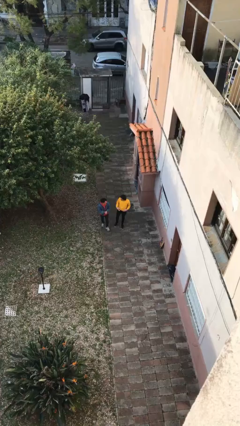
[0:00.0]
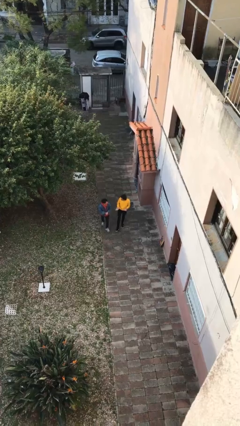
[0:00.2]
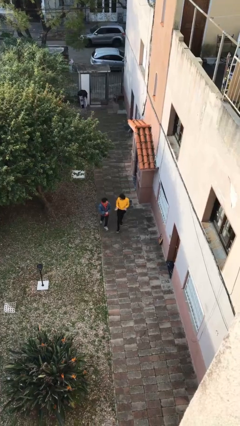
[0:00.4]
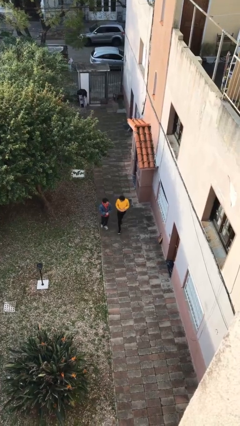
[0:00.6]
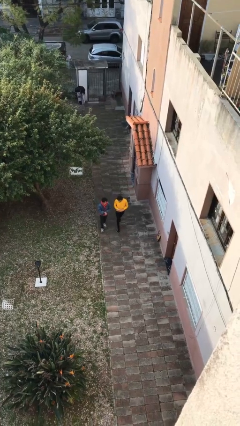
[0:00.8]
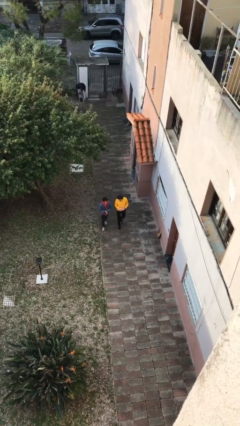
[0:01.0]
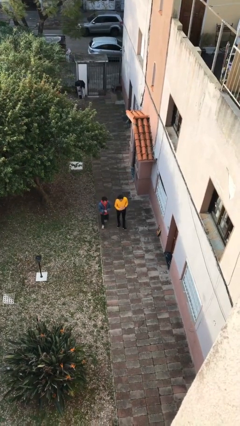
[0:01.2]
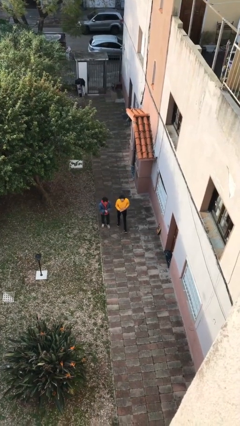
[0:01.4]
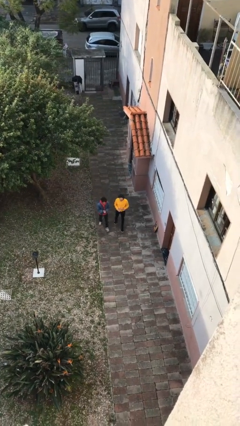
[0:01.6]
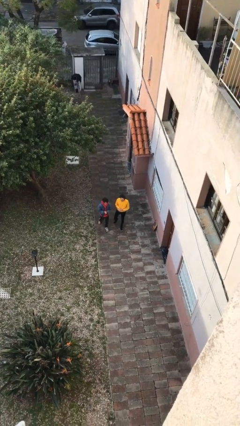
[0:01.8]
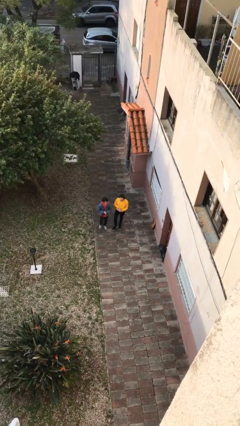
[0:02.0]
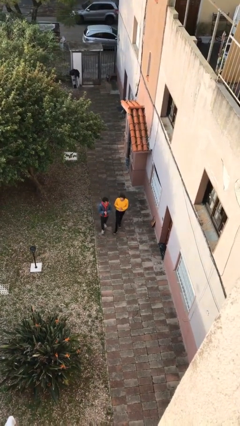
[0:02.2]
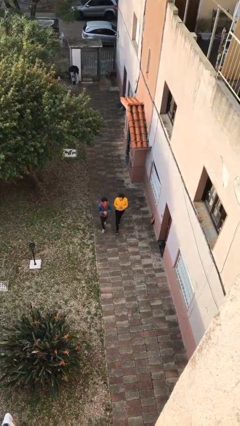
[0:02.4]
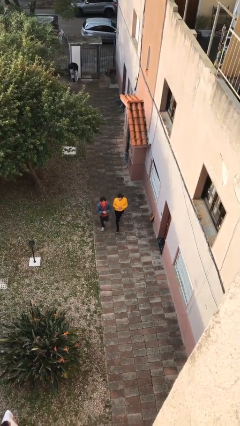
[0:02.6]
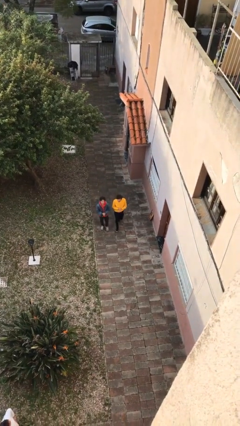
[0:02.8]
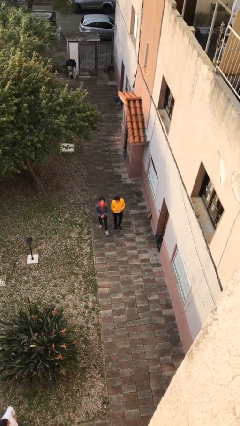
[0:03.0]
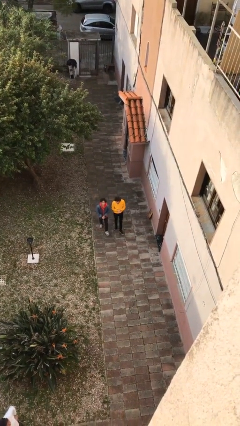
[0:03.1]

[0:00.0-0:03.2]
person talks to person

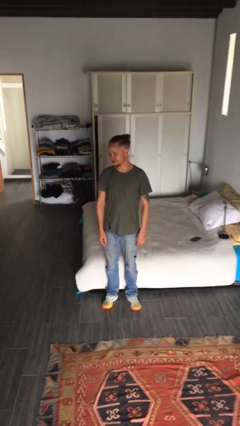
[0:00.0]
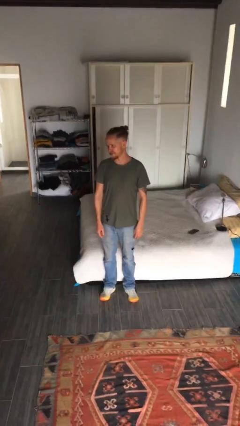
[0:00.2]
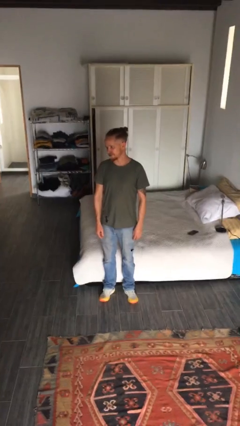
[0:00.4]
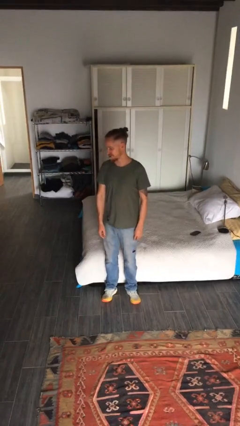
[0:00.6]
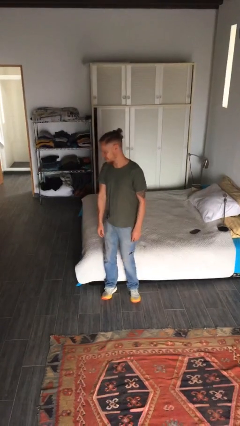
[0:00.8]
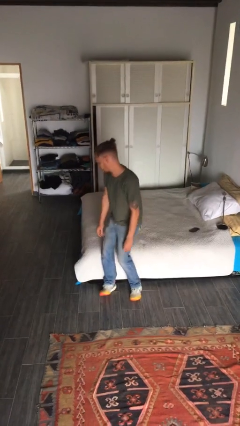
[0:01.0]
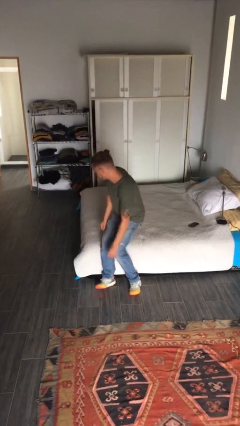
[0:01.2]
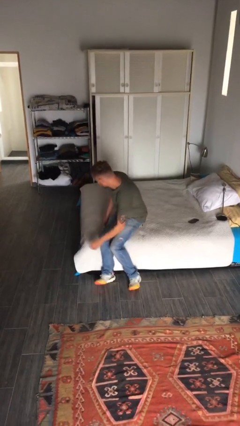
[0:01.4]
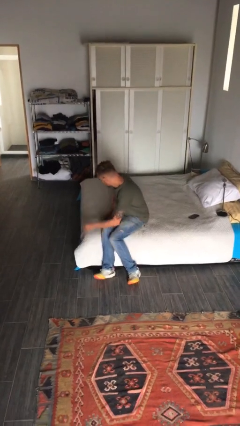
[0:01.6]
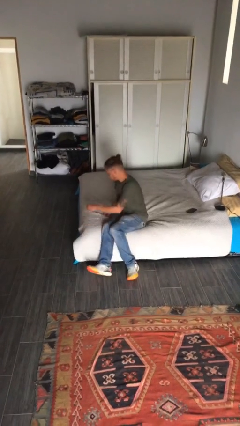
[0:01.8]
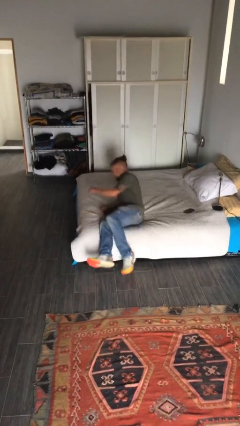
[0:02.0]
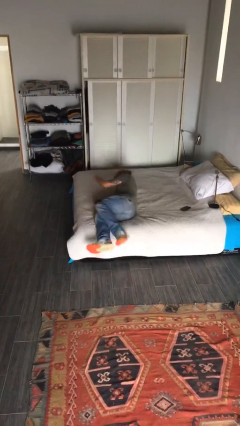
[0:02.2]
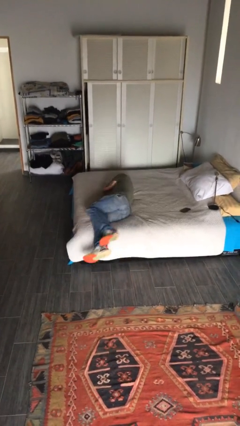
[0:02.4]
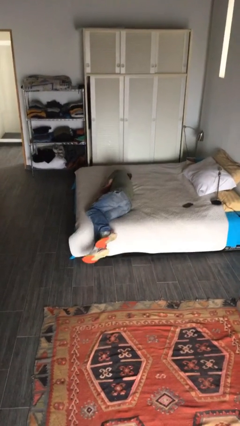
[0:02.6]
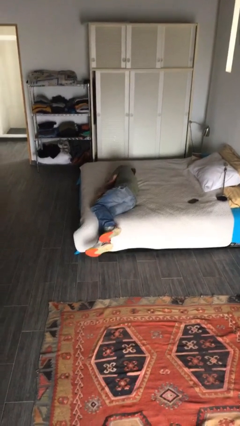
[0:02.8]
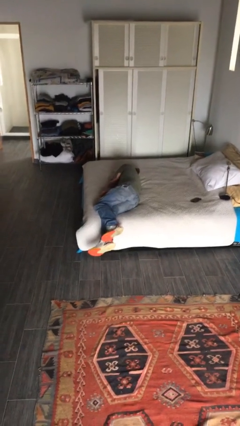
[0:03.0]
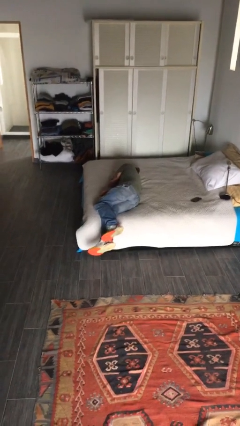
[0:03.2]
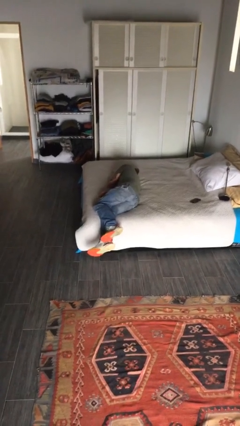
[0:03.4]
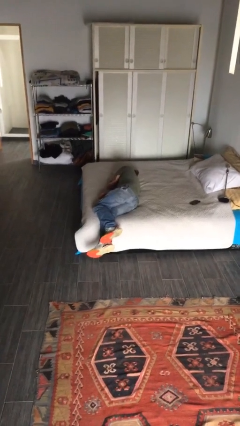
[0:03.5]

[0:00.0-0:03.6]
person lies down on couch

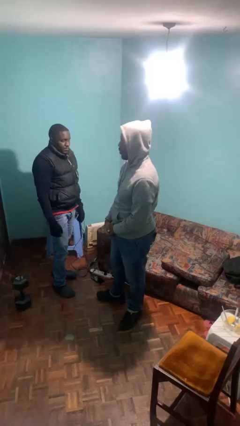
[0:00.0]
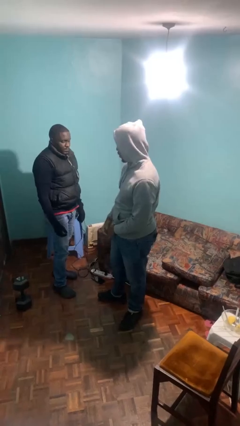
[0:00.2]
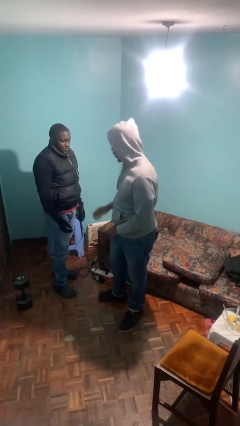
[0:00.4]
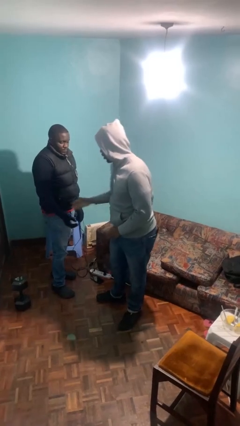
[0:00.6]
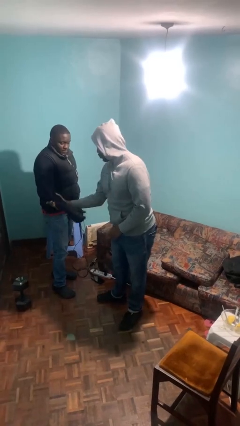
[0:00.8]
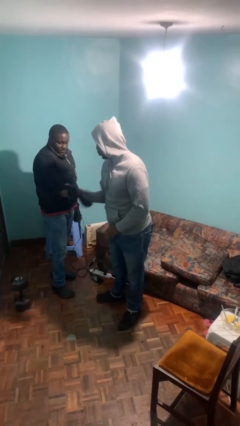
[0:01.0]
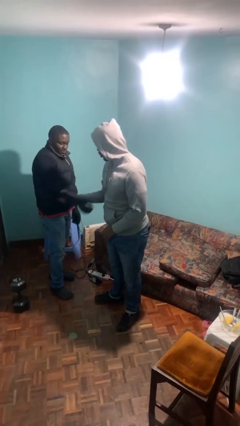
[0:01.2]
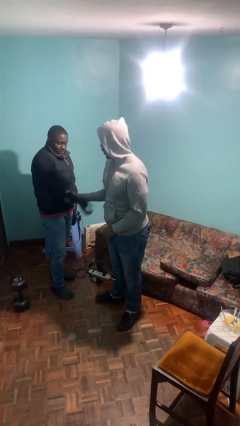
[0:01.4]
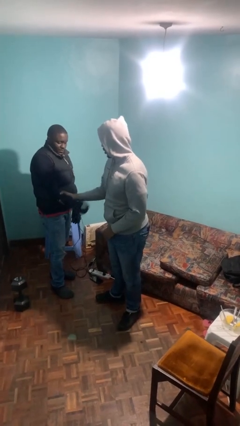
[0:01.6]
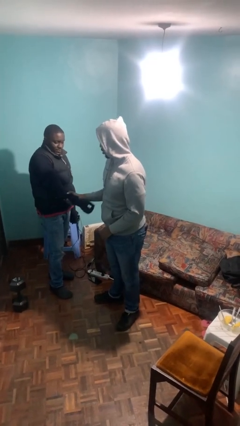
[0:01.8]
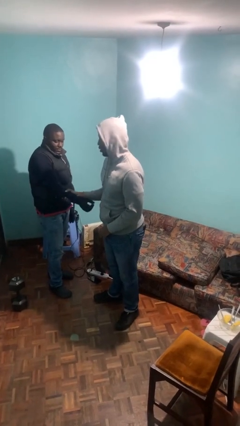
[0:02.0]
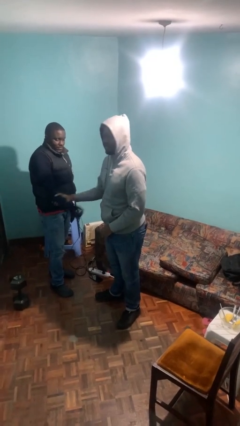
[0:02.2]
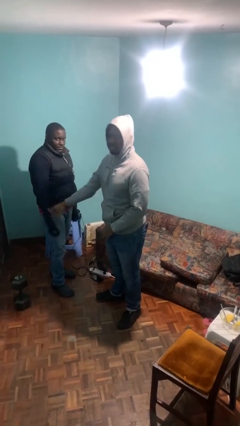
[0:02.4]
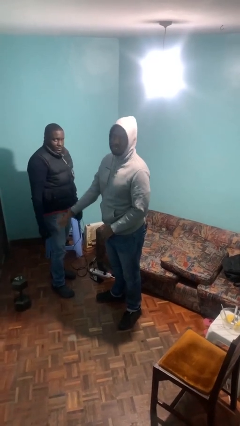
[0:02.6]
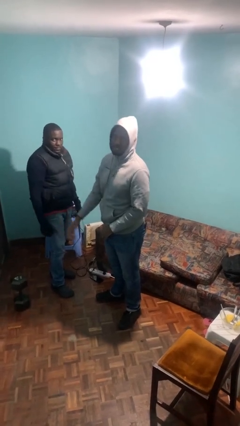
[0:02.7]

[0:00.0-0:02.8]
person grabs person by forearm

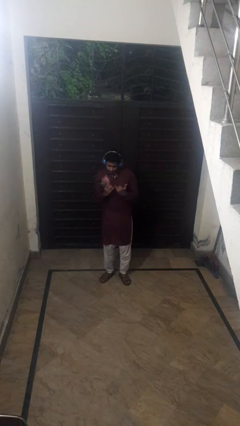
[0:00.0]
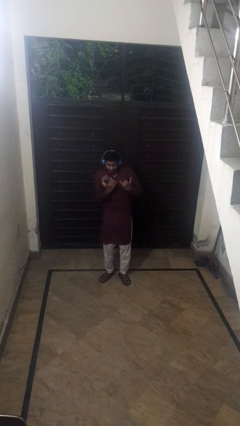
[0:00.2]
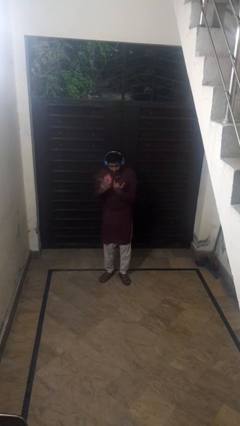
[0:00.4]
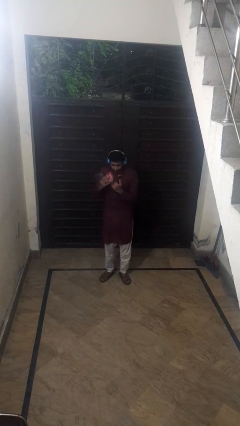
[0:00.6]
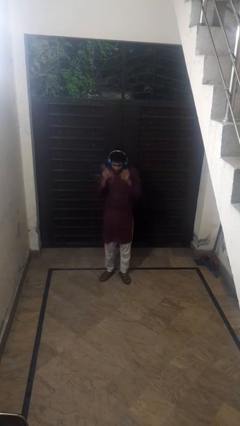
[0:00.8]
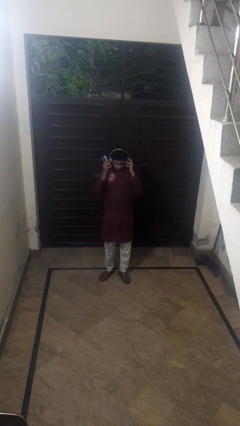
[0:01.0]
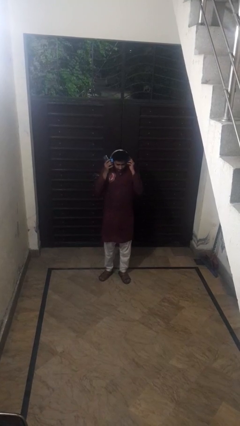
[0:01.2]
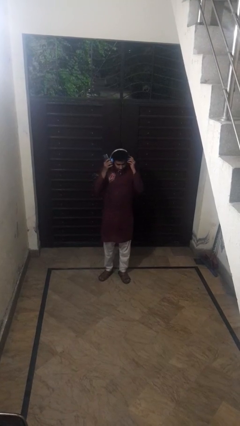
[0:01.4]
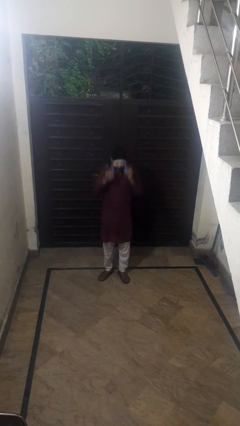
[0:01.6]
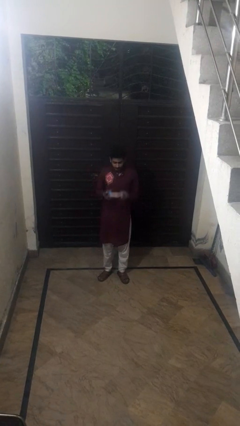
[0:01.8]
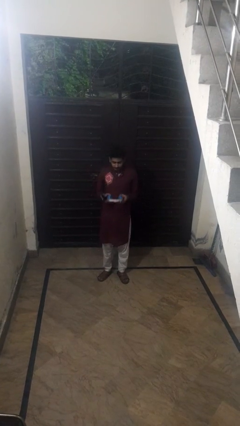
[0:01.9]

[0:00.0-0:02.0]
person takes off headphones

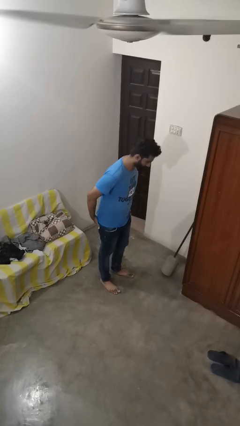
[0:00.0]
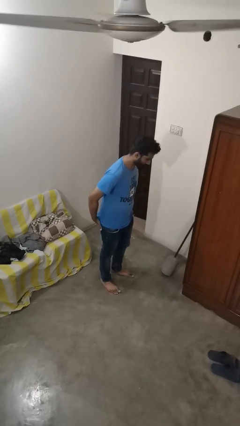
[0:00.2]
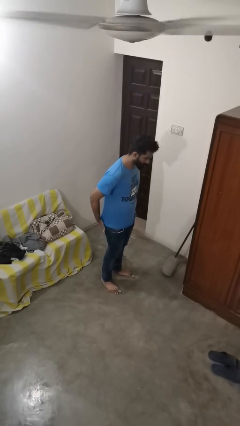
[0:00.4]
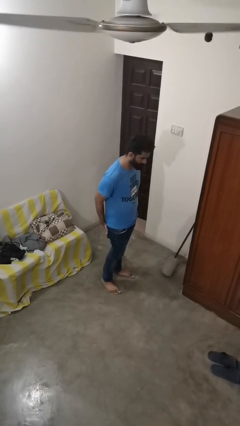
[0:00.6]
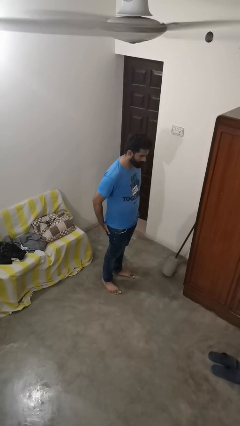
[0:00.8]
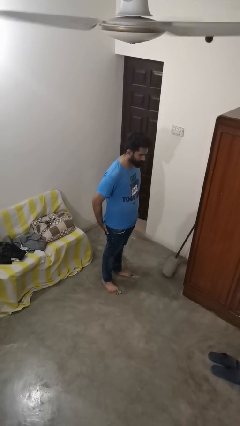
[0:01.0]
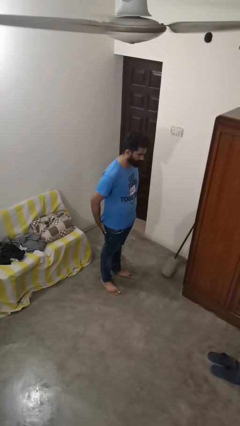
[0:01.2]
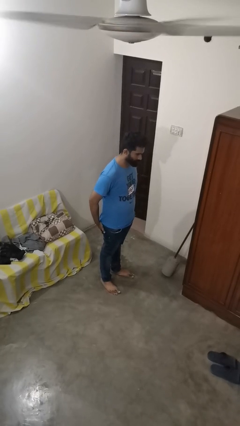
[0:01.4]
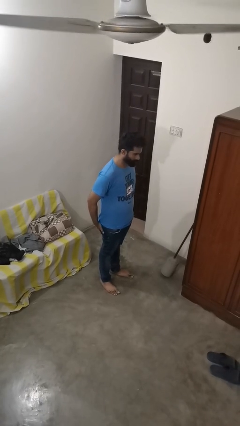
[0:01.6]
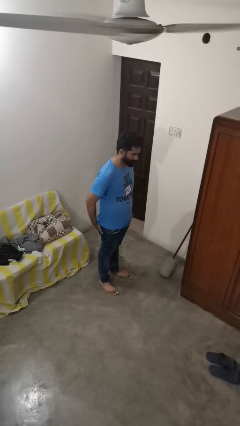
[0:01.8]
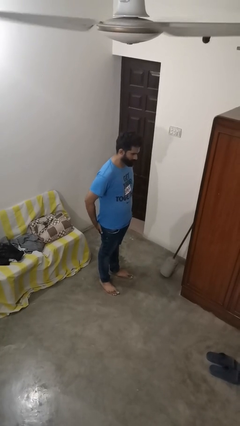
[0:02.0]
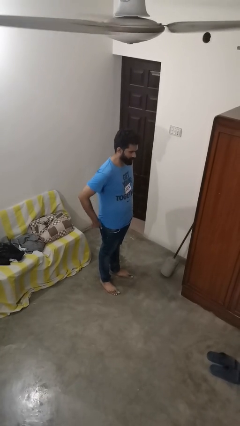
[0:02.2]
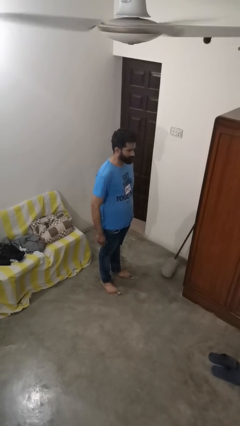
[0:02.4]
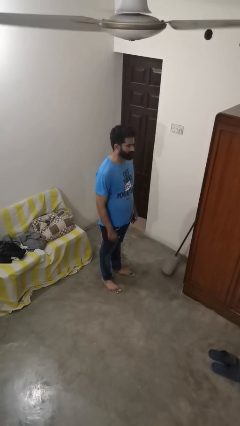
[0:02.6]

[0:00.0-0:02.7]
person puts hands in back pockets

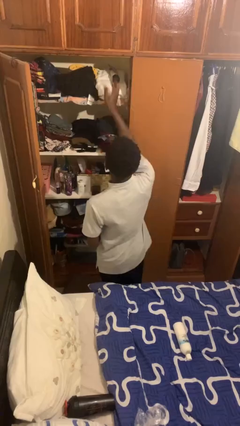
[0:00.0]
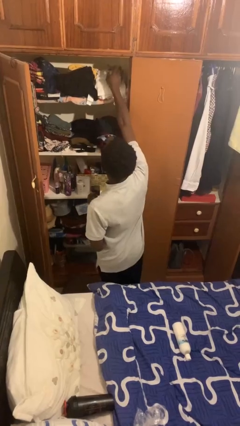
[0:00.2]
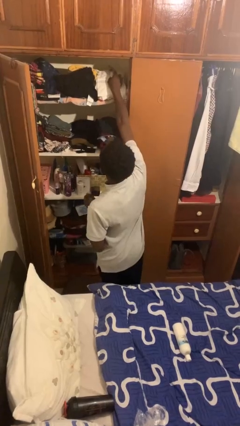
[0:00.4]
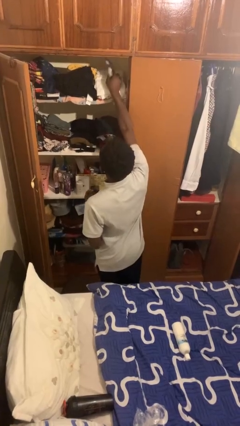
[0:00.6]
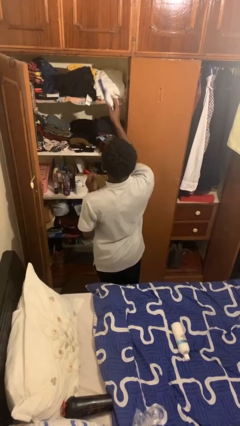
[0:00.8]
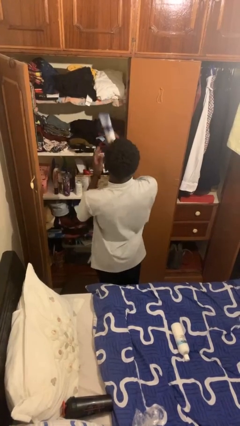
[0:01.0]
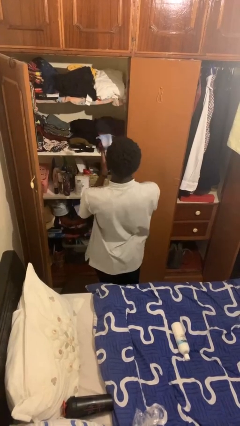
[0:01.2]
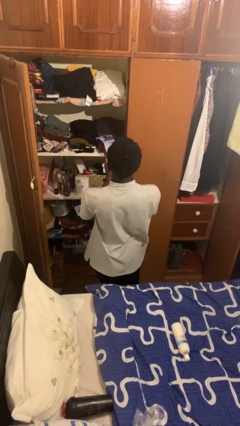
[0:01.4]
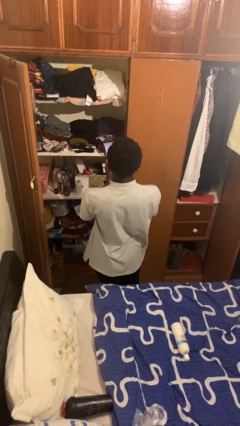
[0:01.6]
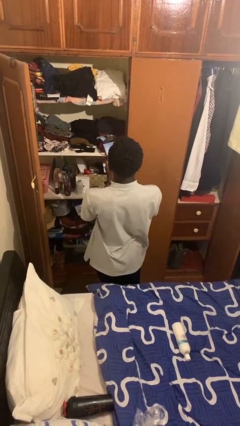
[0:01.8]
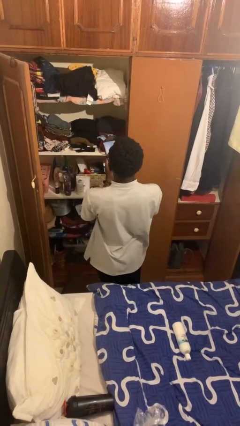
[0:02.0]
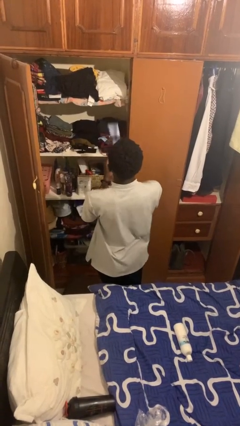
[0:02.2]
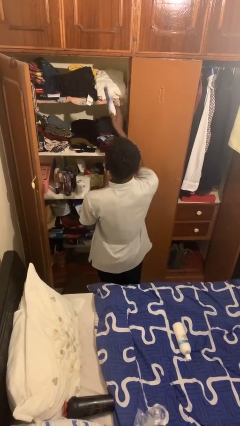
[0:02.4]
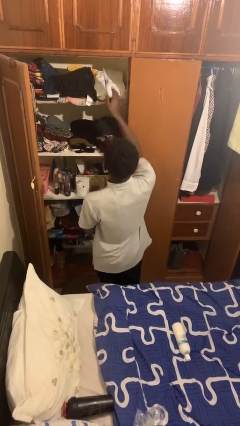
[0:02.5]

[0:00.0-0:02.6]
person picks up object from shelf

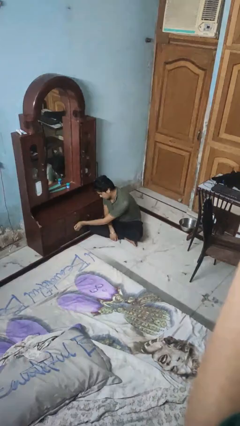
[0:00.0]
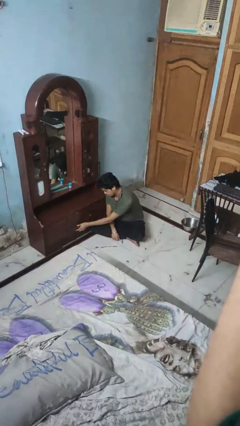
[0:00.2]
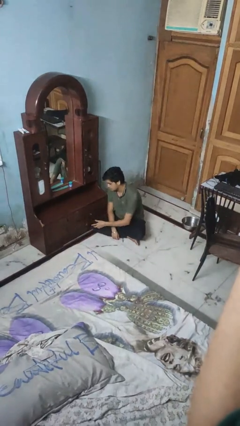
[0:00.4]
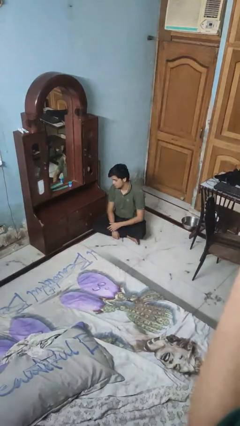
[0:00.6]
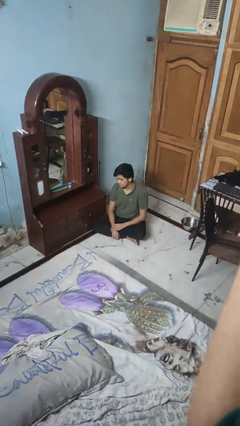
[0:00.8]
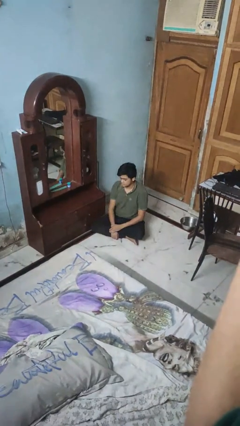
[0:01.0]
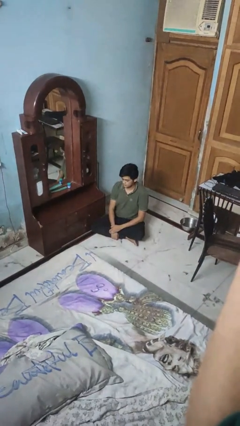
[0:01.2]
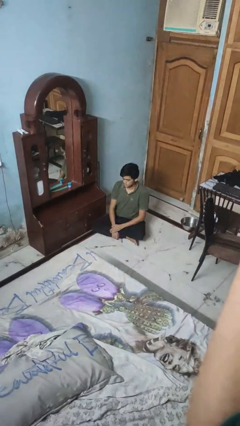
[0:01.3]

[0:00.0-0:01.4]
person closes dresser drawer
